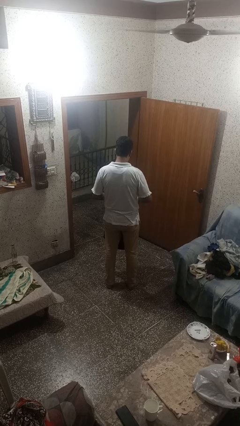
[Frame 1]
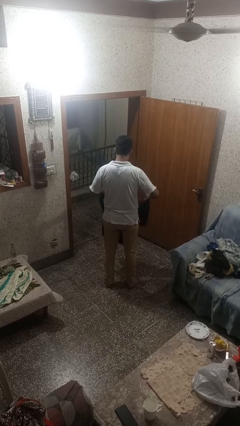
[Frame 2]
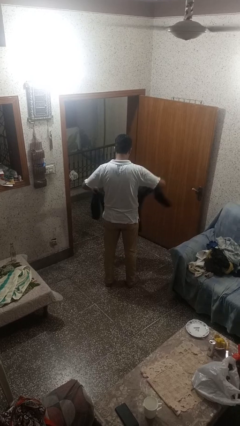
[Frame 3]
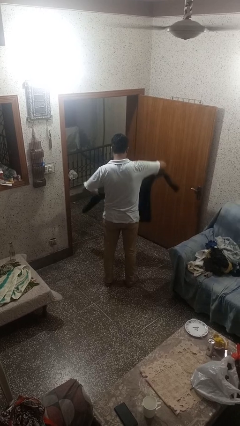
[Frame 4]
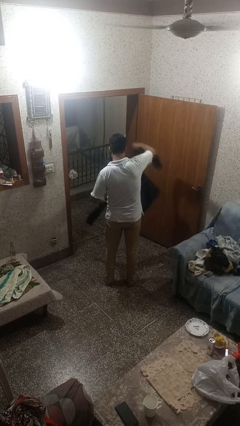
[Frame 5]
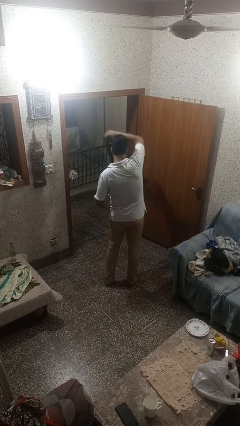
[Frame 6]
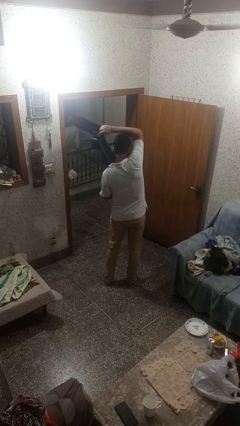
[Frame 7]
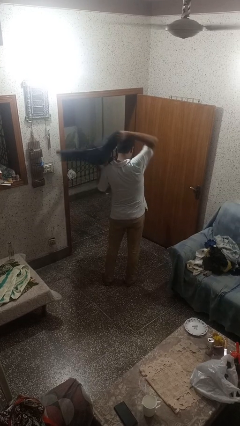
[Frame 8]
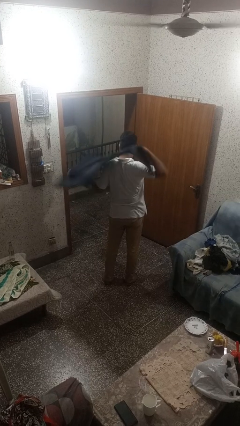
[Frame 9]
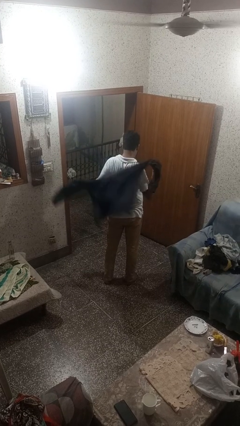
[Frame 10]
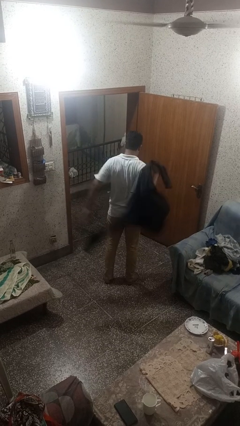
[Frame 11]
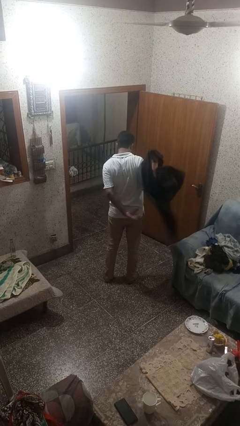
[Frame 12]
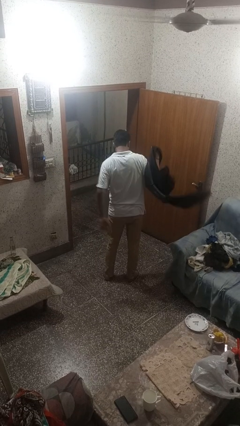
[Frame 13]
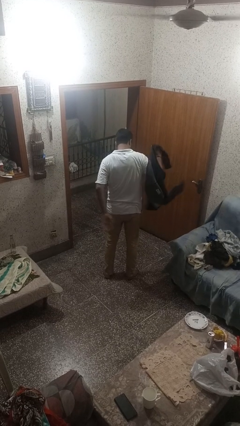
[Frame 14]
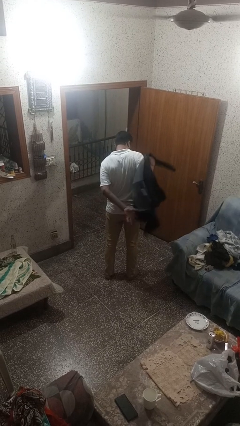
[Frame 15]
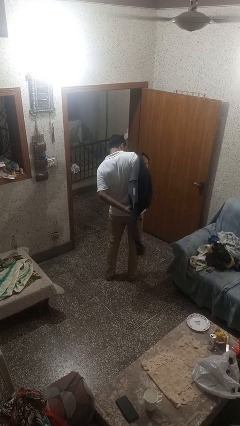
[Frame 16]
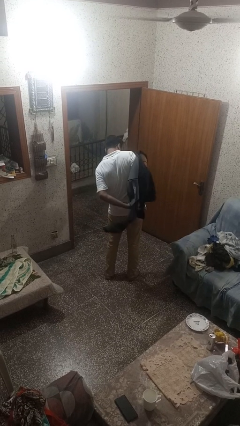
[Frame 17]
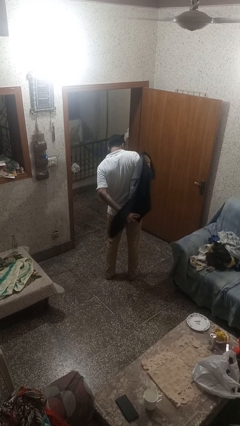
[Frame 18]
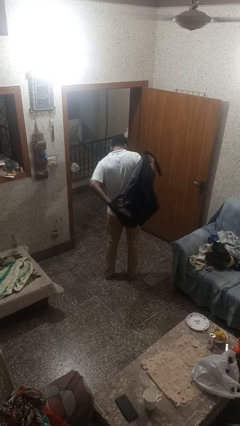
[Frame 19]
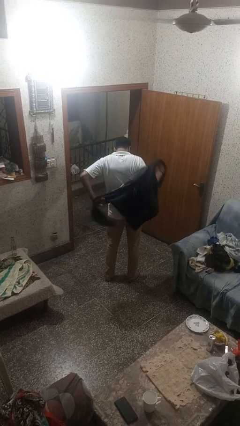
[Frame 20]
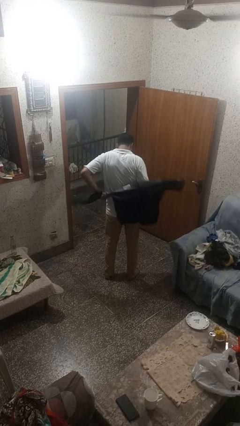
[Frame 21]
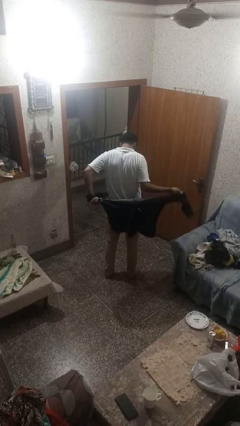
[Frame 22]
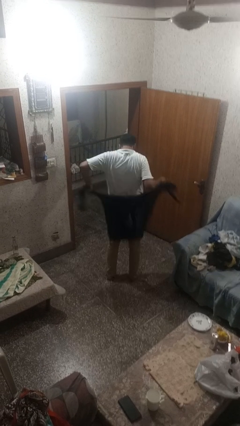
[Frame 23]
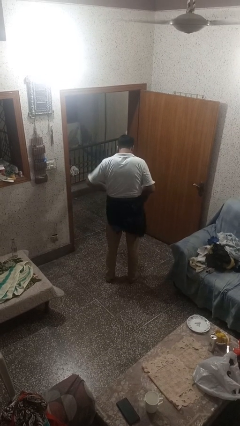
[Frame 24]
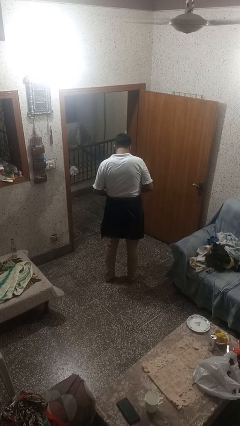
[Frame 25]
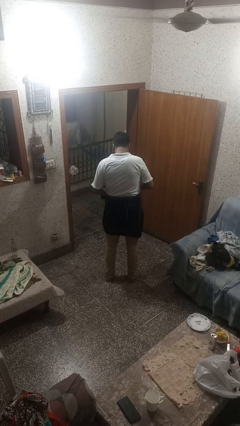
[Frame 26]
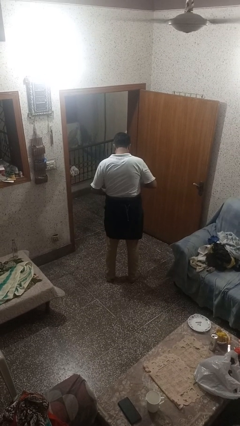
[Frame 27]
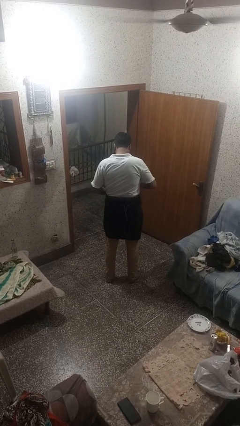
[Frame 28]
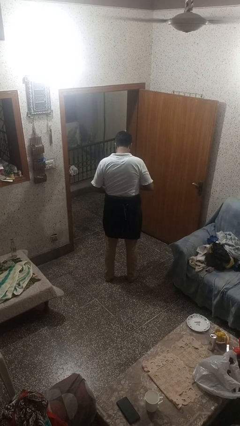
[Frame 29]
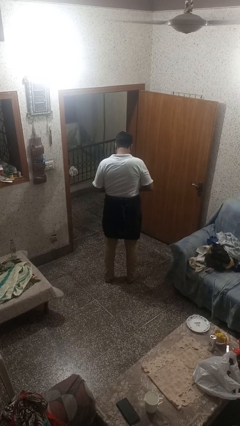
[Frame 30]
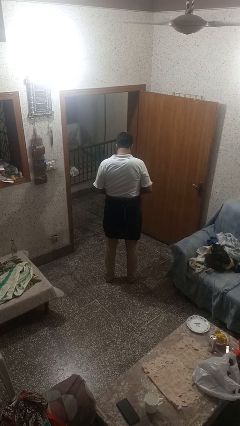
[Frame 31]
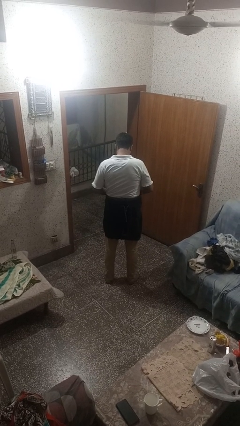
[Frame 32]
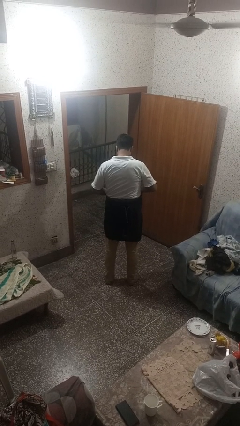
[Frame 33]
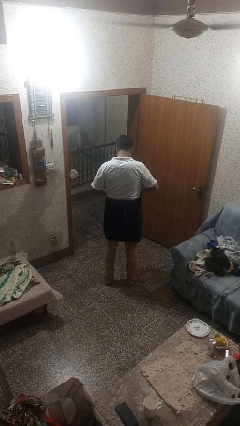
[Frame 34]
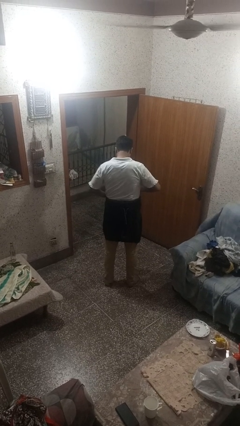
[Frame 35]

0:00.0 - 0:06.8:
person ties jacket around waist

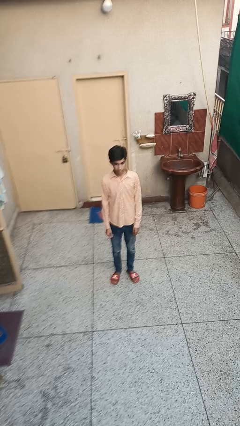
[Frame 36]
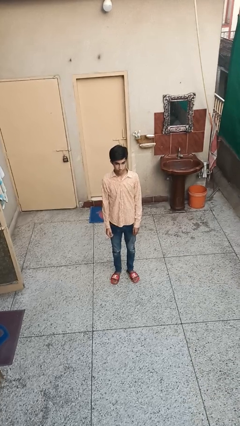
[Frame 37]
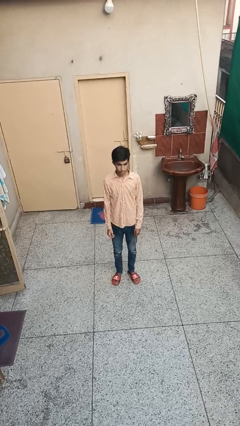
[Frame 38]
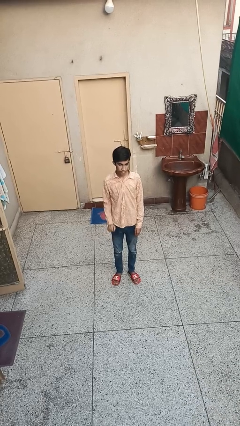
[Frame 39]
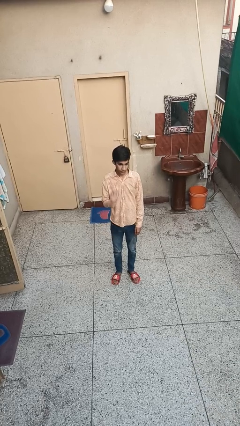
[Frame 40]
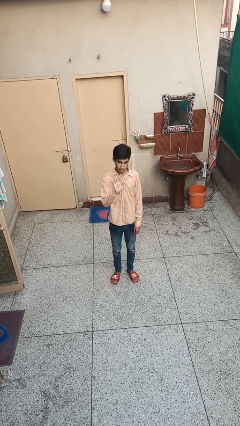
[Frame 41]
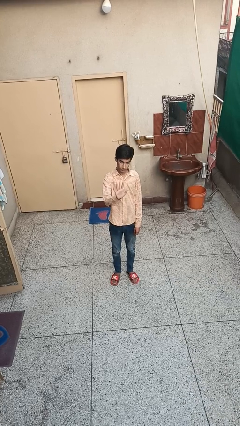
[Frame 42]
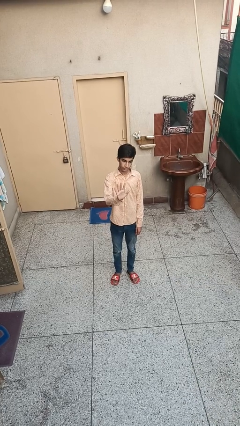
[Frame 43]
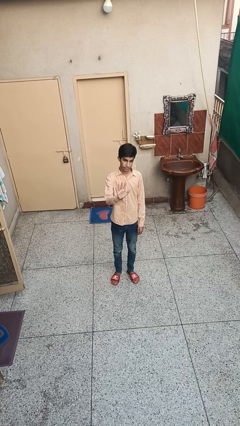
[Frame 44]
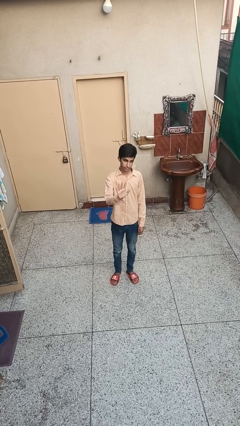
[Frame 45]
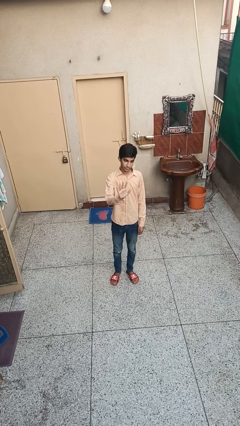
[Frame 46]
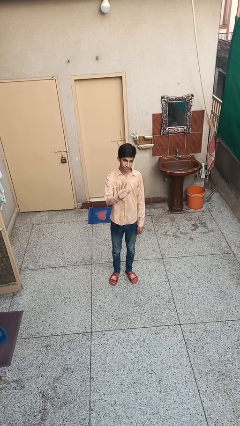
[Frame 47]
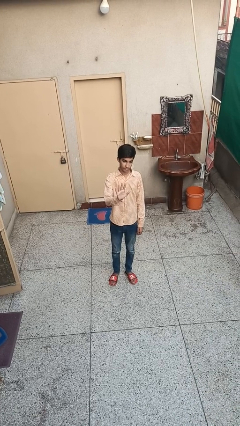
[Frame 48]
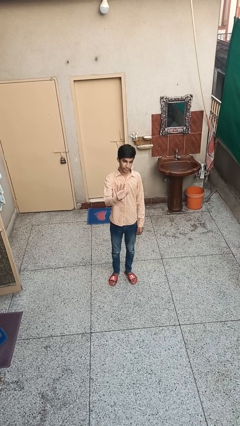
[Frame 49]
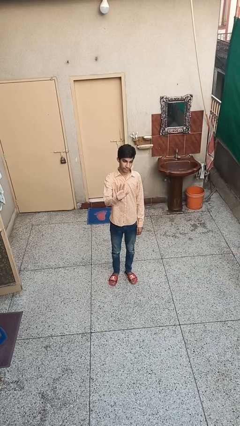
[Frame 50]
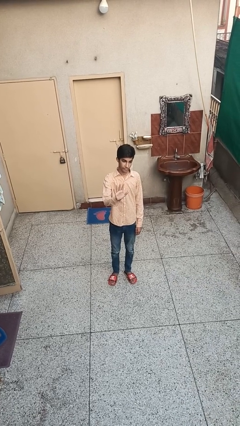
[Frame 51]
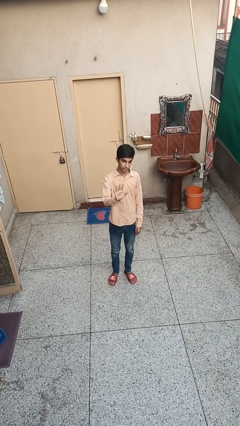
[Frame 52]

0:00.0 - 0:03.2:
person gestures number five

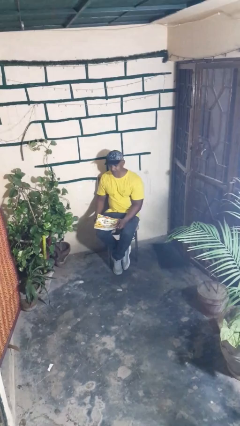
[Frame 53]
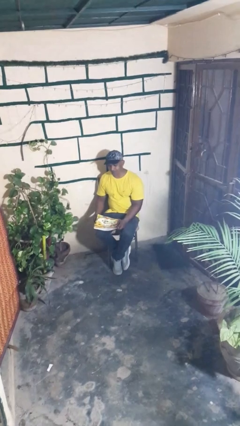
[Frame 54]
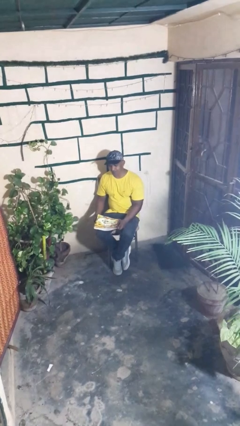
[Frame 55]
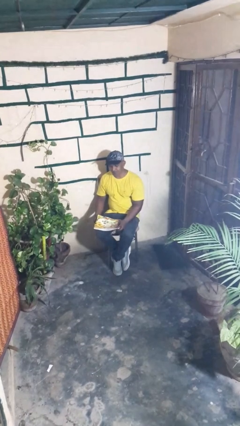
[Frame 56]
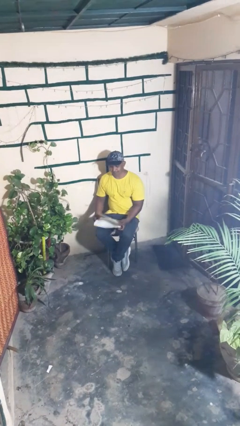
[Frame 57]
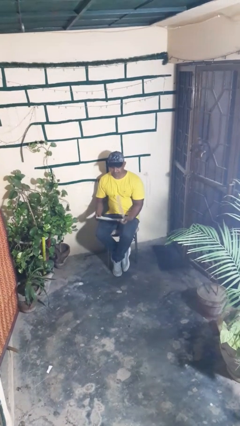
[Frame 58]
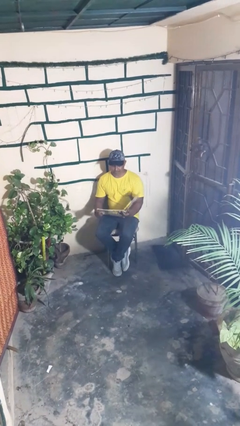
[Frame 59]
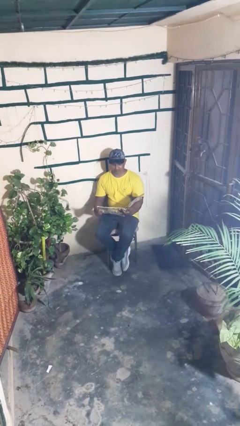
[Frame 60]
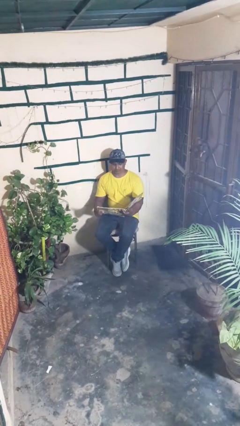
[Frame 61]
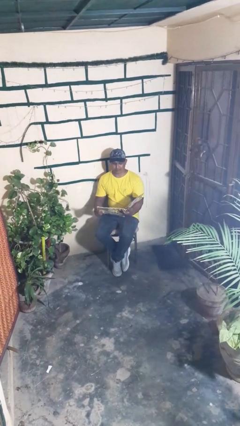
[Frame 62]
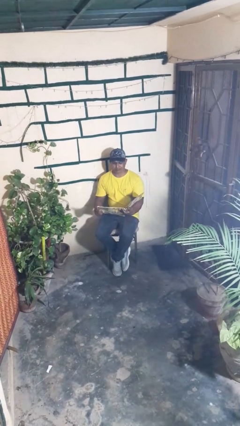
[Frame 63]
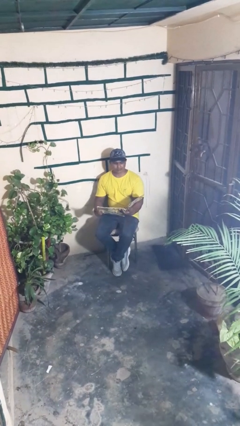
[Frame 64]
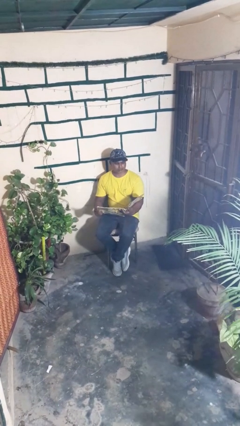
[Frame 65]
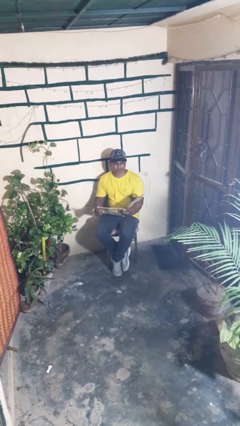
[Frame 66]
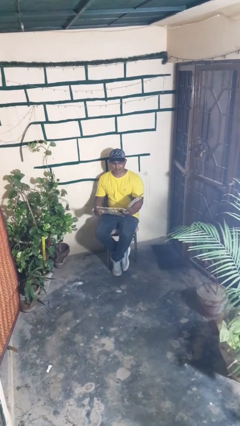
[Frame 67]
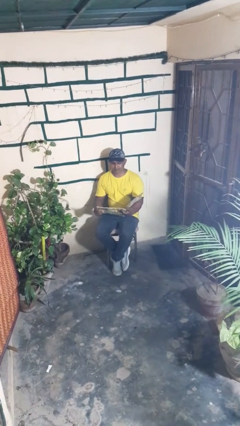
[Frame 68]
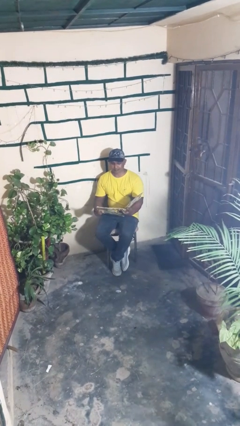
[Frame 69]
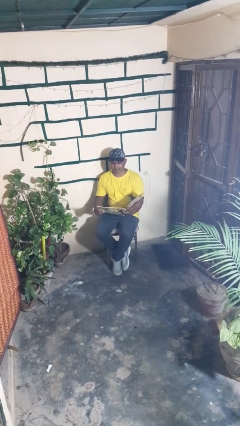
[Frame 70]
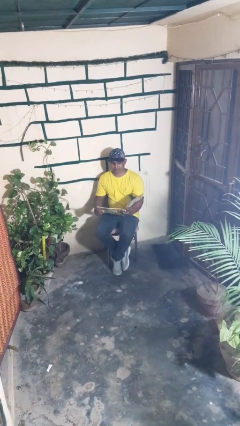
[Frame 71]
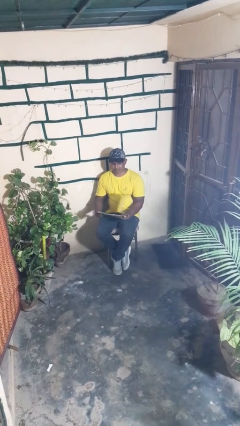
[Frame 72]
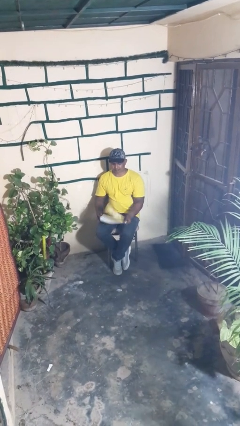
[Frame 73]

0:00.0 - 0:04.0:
person reads magazine

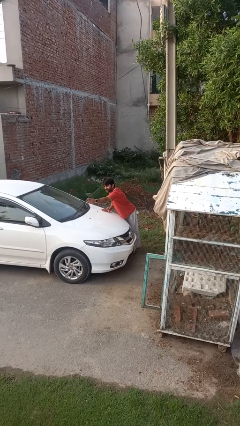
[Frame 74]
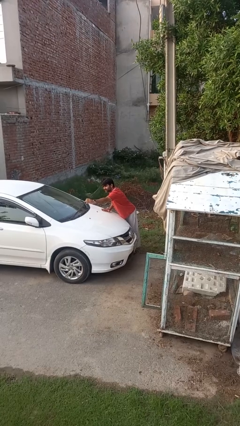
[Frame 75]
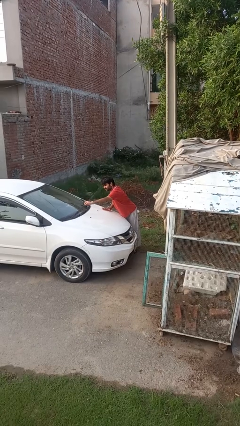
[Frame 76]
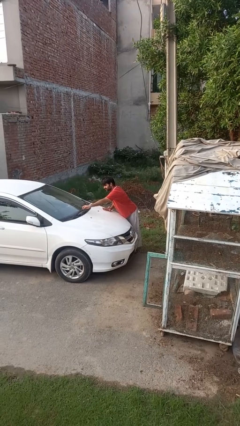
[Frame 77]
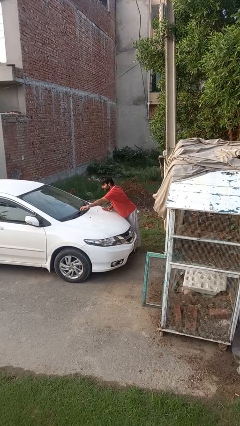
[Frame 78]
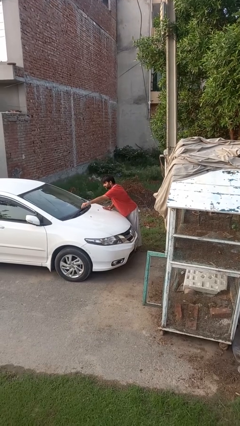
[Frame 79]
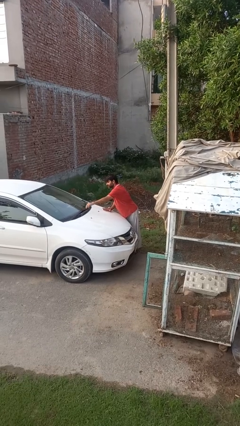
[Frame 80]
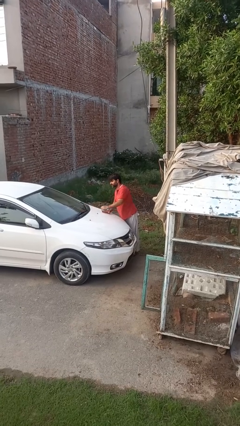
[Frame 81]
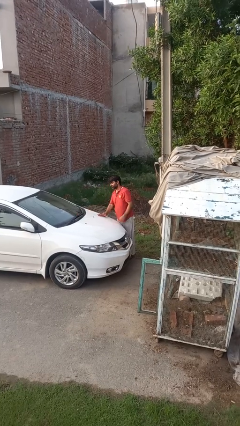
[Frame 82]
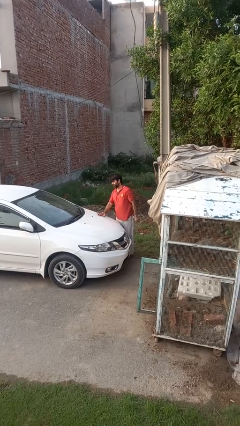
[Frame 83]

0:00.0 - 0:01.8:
person flips down car wipers

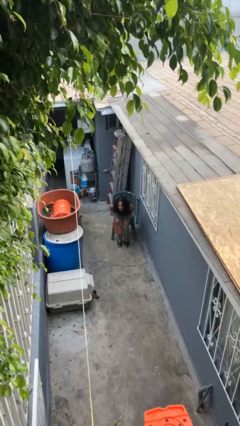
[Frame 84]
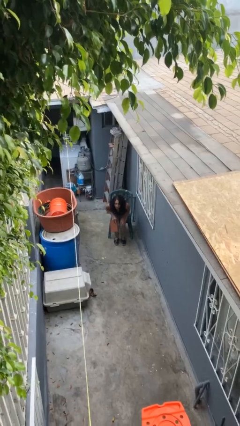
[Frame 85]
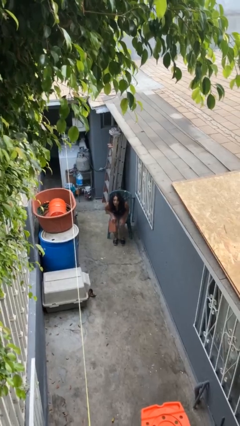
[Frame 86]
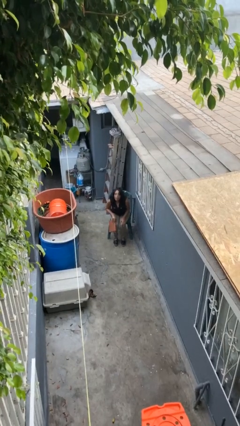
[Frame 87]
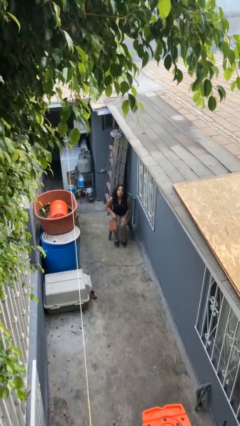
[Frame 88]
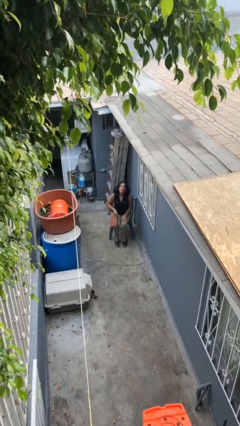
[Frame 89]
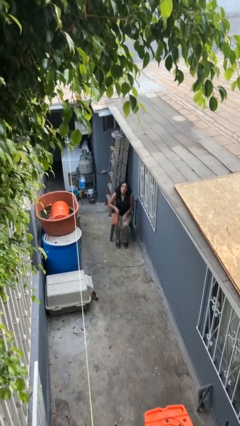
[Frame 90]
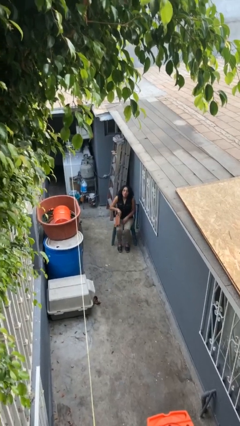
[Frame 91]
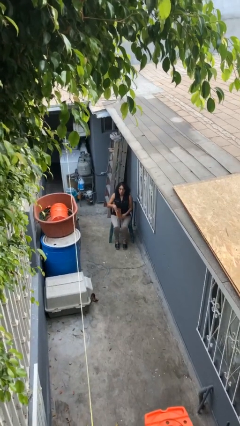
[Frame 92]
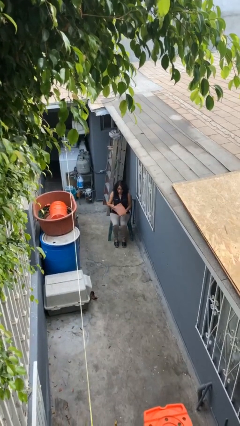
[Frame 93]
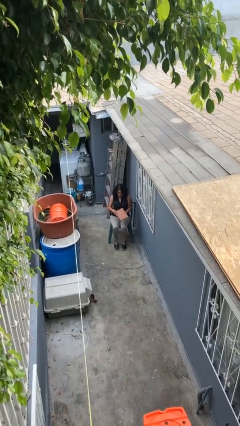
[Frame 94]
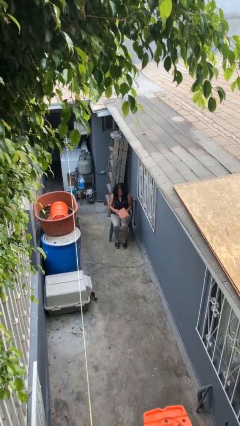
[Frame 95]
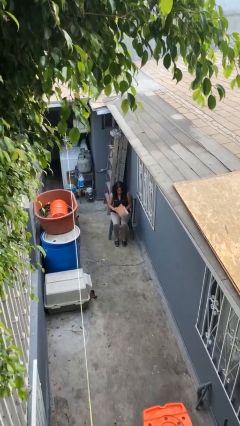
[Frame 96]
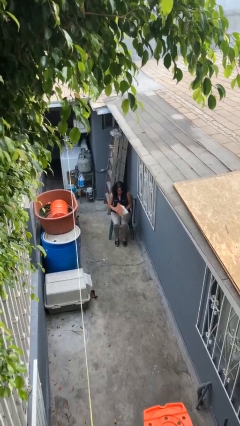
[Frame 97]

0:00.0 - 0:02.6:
person sits down
